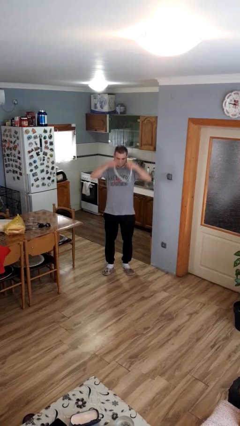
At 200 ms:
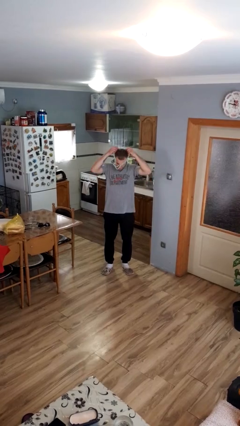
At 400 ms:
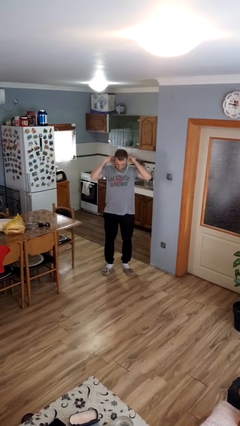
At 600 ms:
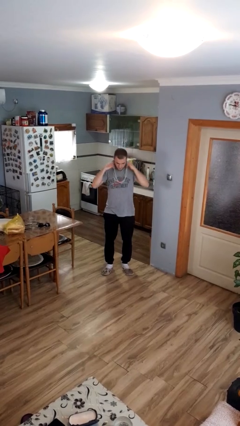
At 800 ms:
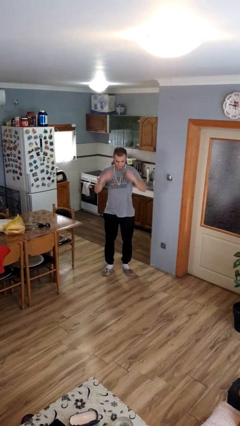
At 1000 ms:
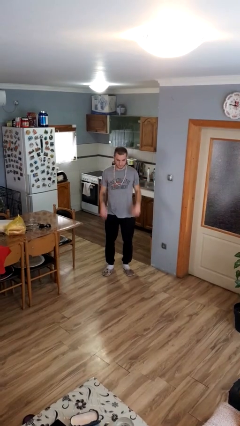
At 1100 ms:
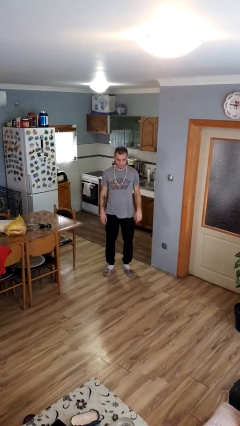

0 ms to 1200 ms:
person puts on necklace

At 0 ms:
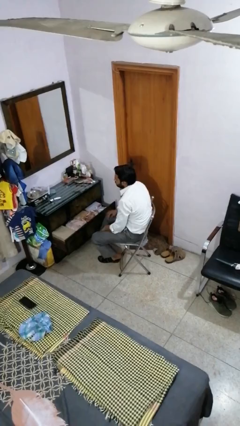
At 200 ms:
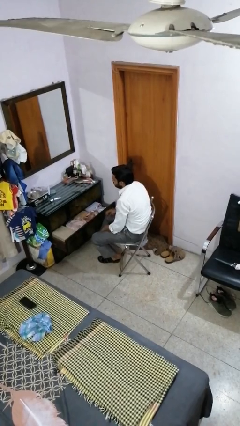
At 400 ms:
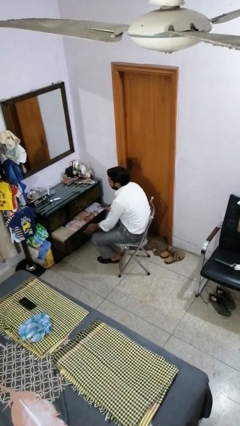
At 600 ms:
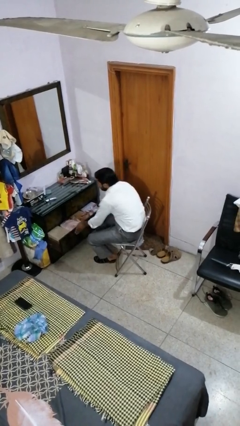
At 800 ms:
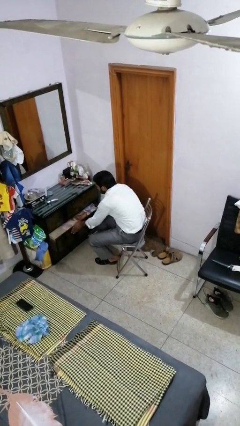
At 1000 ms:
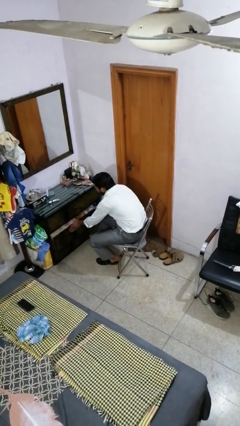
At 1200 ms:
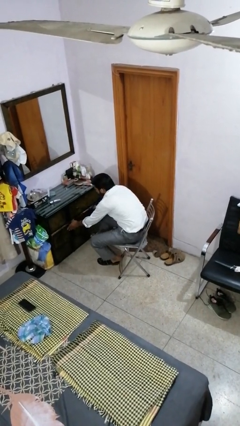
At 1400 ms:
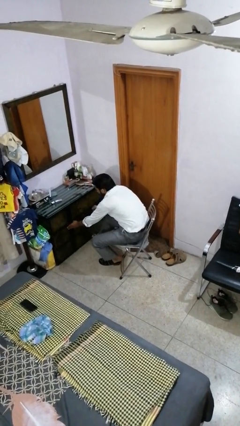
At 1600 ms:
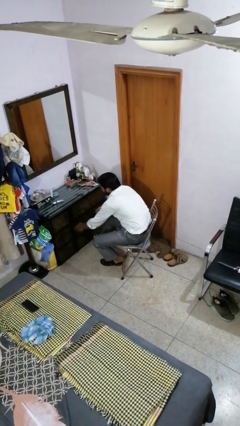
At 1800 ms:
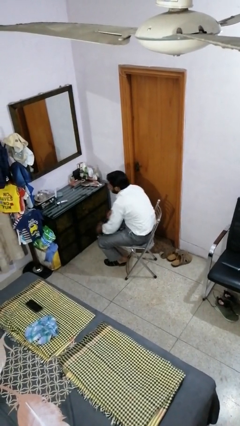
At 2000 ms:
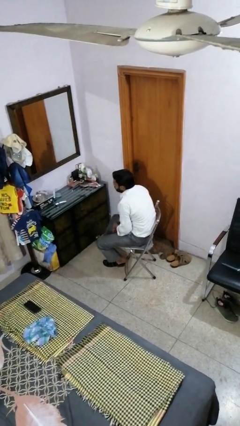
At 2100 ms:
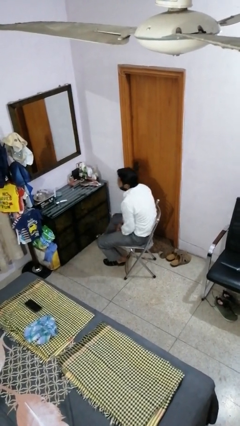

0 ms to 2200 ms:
person closes dresser drawer

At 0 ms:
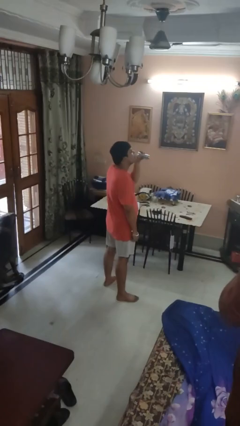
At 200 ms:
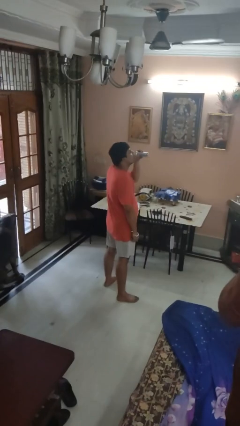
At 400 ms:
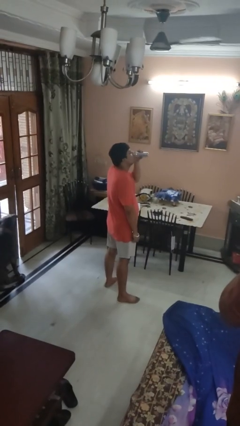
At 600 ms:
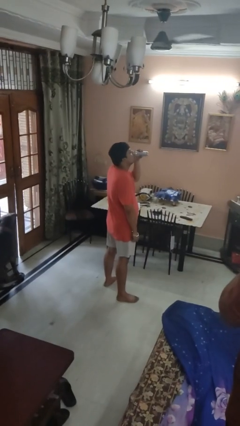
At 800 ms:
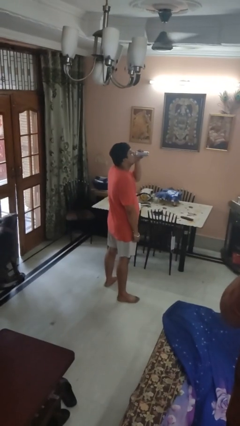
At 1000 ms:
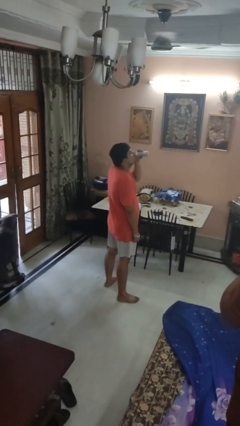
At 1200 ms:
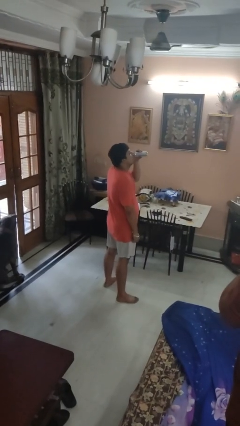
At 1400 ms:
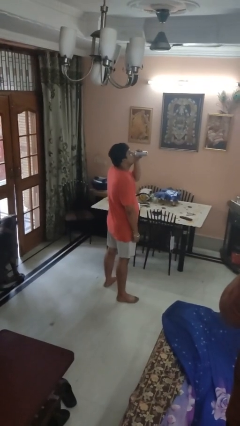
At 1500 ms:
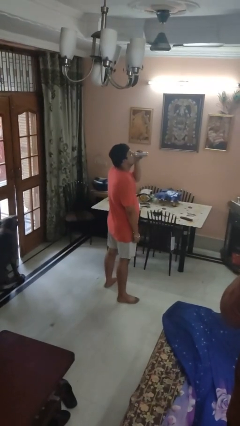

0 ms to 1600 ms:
person drinks from beverage can

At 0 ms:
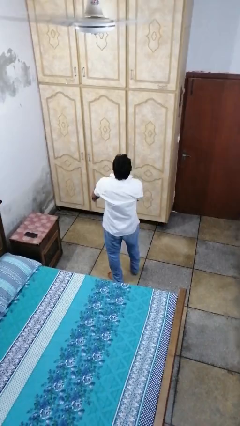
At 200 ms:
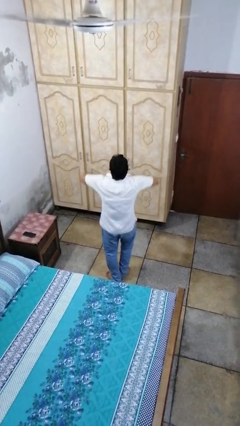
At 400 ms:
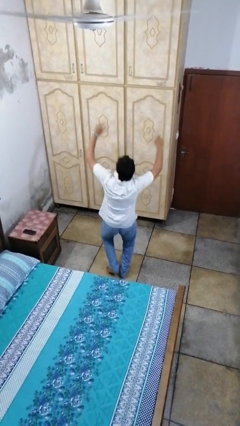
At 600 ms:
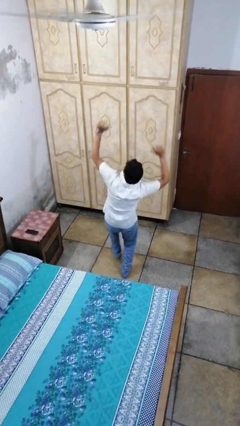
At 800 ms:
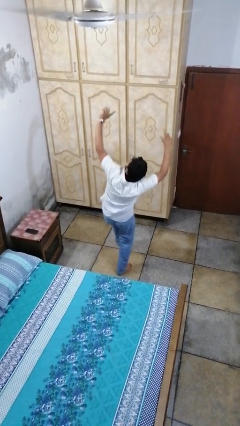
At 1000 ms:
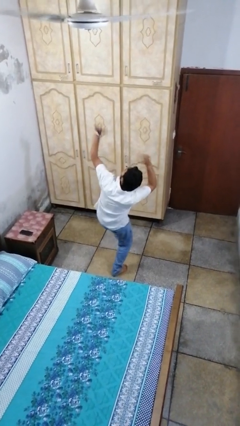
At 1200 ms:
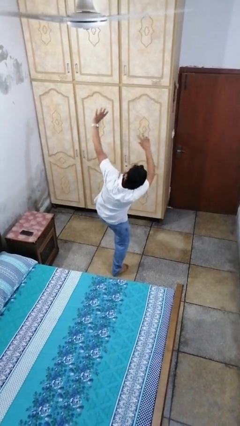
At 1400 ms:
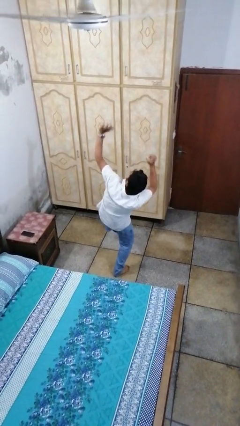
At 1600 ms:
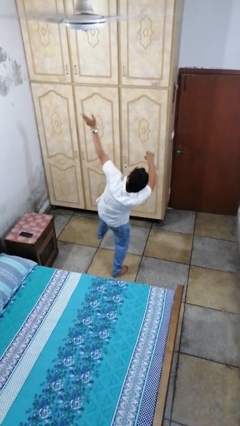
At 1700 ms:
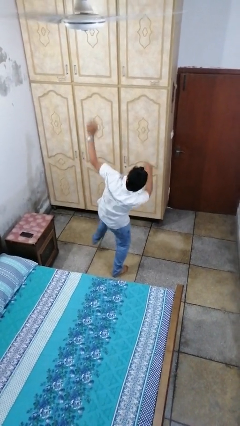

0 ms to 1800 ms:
person dances in place

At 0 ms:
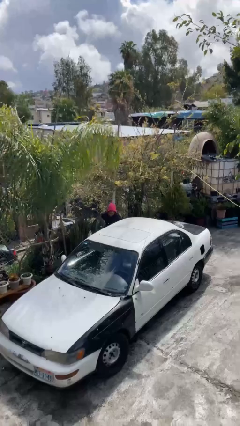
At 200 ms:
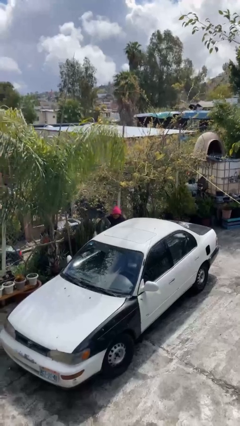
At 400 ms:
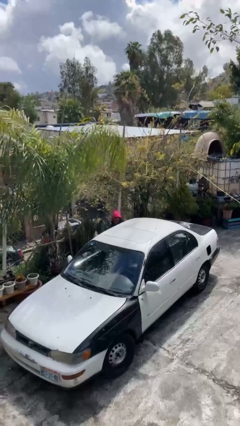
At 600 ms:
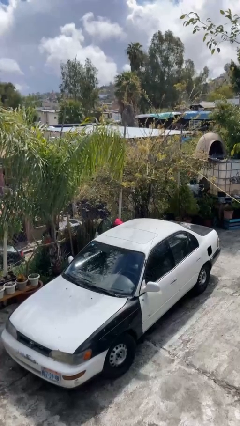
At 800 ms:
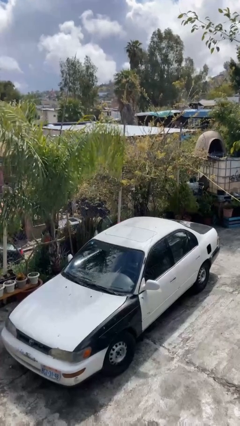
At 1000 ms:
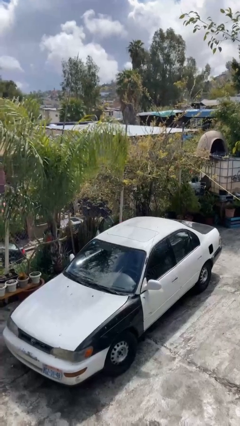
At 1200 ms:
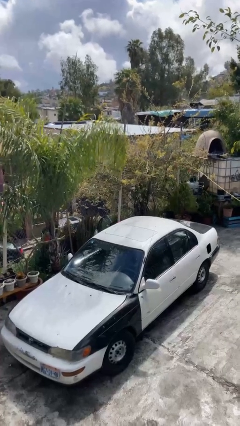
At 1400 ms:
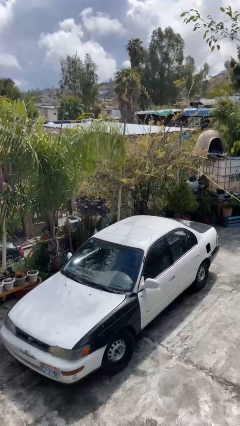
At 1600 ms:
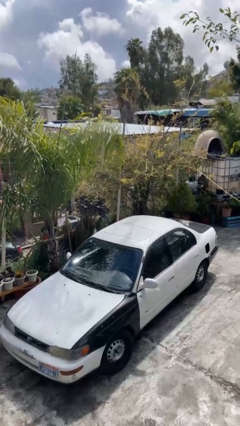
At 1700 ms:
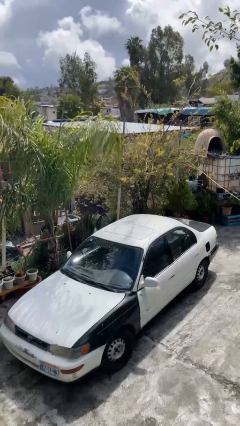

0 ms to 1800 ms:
person enters car

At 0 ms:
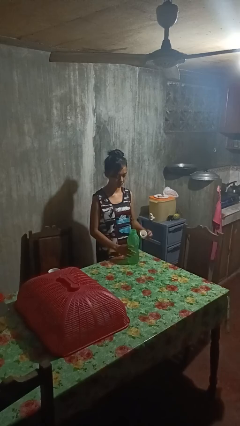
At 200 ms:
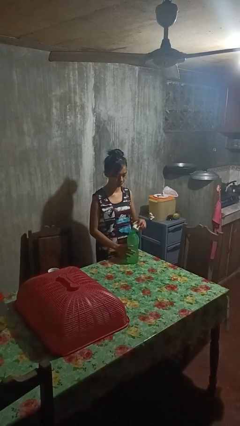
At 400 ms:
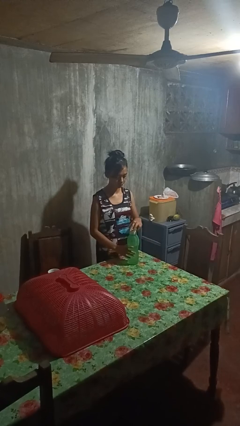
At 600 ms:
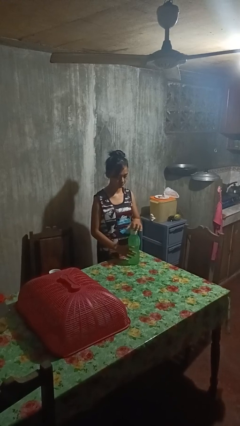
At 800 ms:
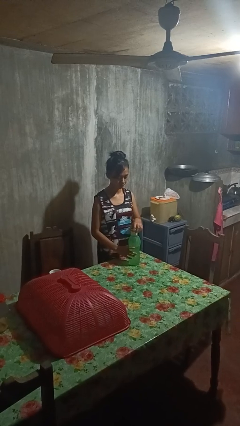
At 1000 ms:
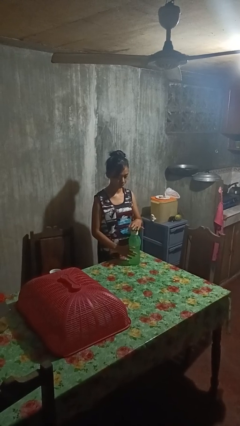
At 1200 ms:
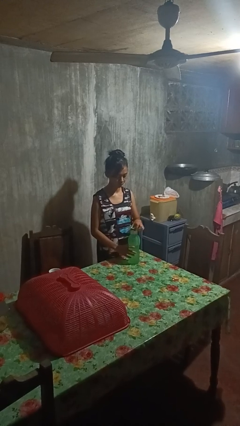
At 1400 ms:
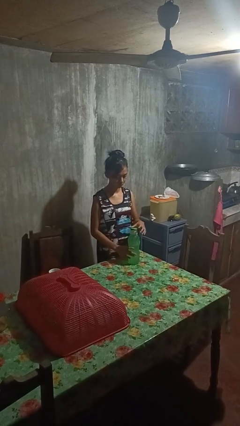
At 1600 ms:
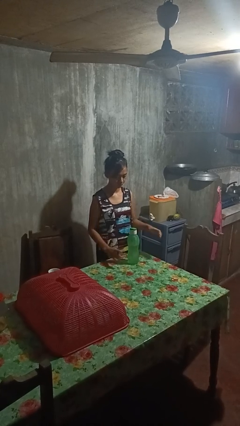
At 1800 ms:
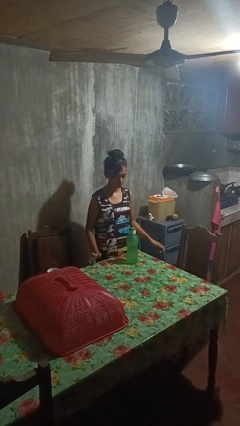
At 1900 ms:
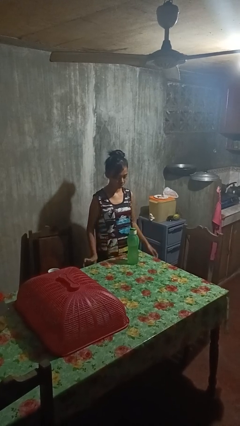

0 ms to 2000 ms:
person screws lid to bottle

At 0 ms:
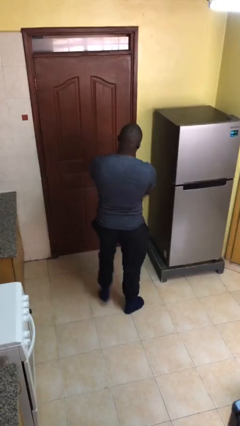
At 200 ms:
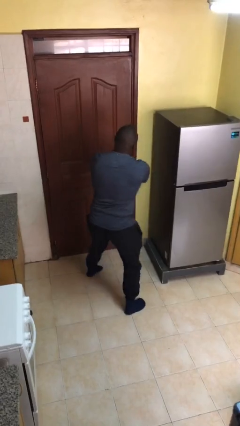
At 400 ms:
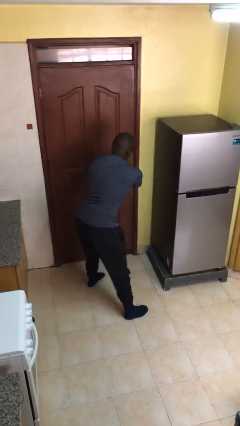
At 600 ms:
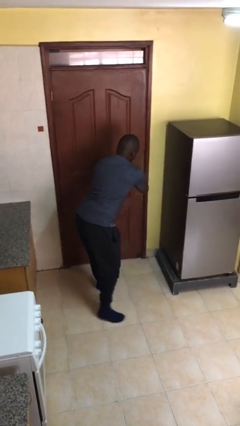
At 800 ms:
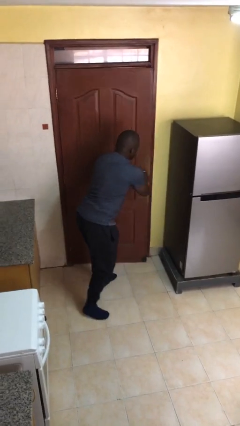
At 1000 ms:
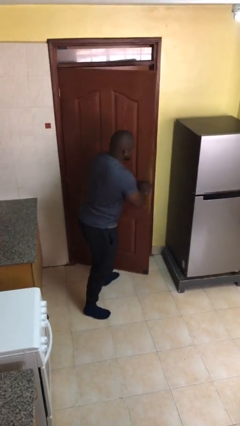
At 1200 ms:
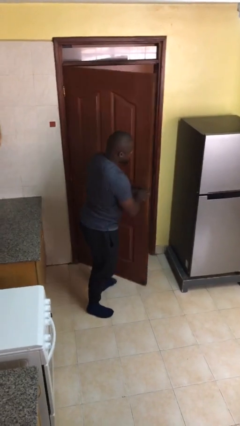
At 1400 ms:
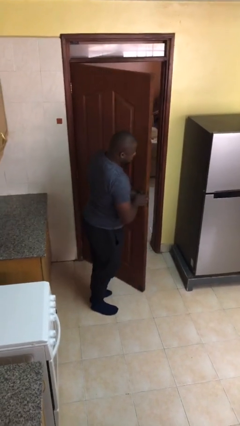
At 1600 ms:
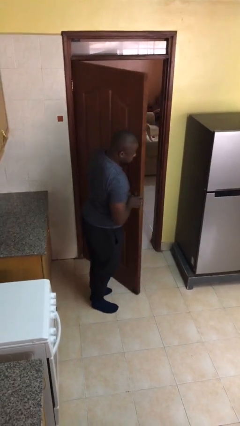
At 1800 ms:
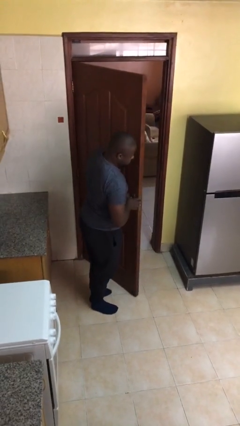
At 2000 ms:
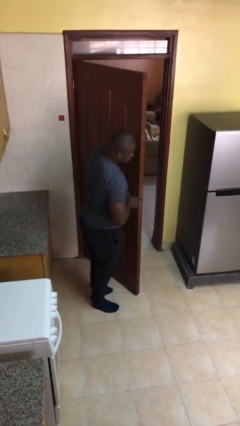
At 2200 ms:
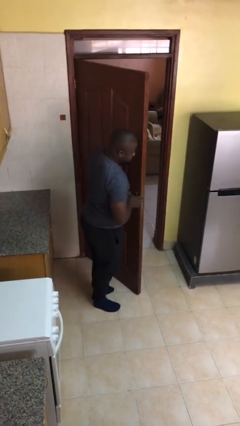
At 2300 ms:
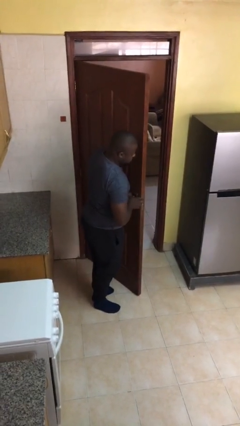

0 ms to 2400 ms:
person opens facility door

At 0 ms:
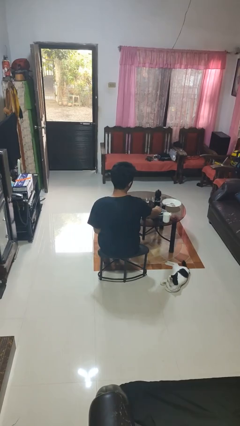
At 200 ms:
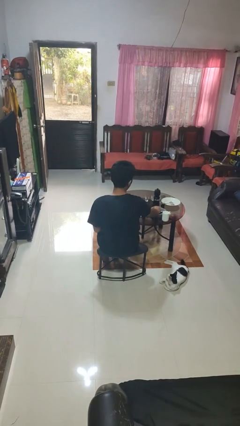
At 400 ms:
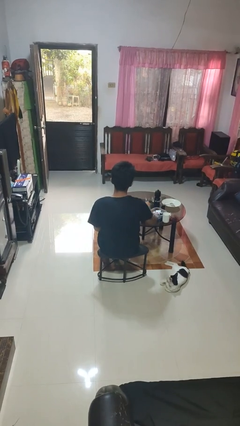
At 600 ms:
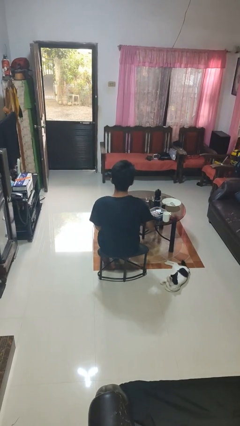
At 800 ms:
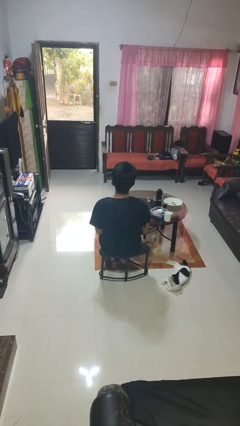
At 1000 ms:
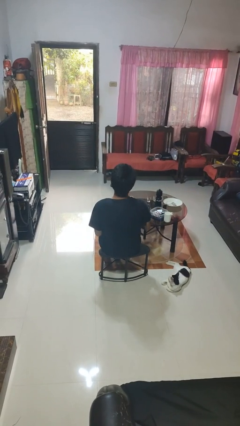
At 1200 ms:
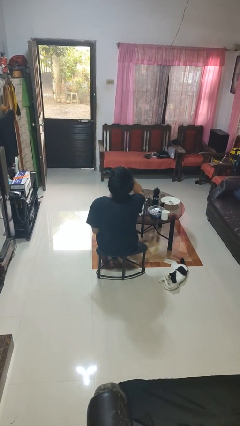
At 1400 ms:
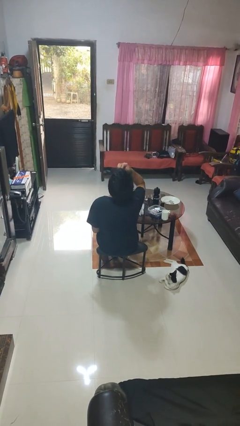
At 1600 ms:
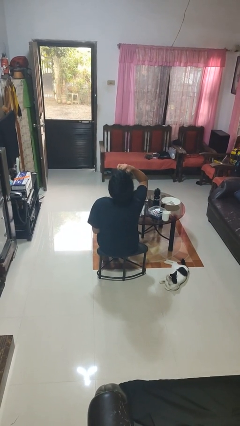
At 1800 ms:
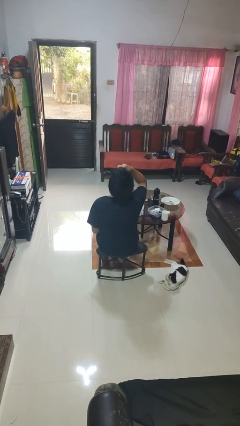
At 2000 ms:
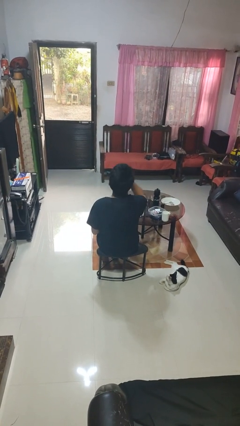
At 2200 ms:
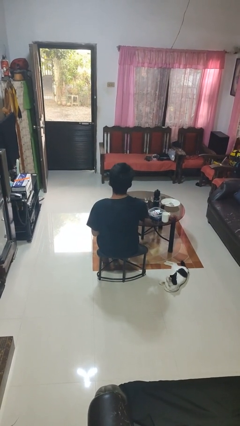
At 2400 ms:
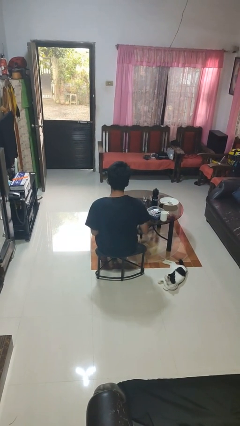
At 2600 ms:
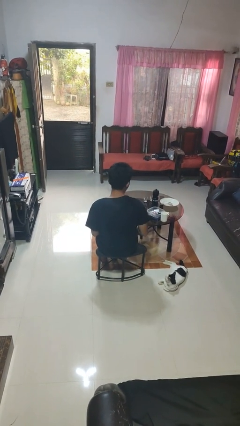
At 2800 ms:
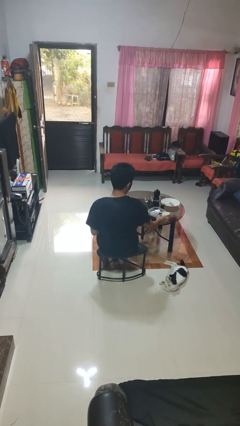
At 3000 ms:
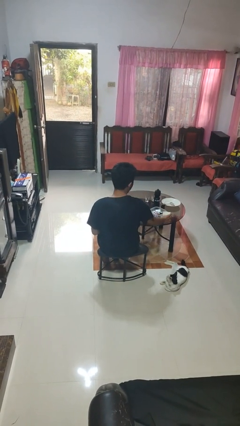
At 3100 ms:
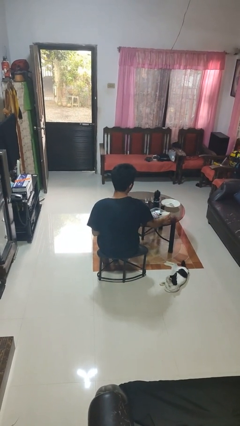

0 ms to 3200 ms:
person takes medicine pills

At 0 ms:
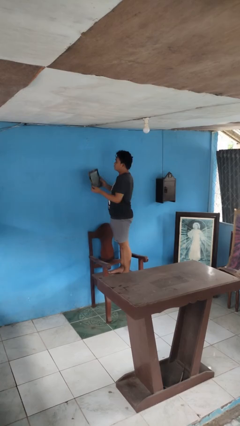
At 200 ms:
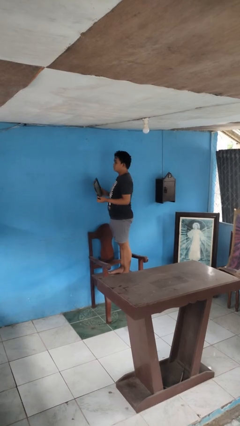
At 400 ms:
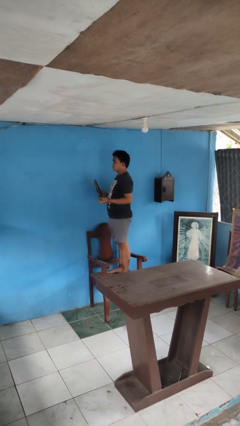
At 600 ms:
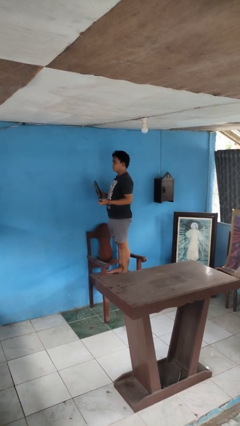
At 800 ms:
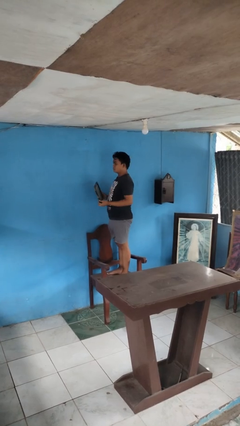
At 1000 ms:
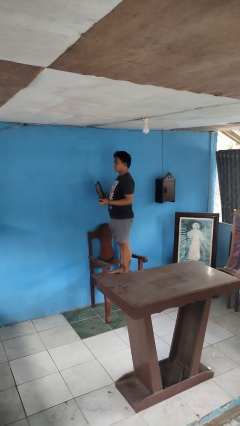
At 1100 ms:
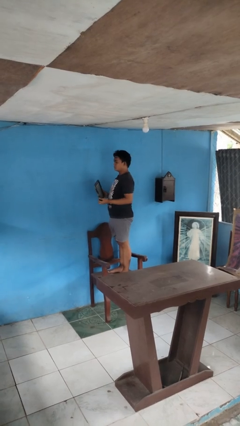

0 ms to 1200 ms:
person takes down picture frame
